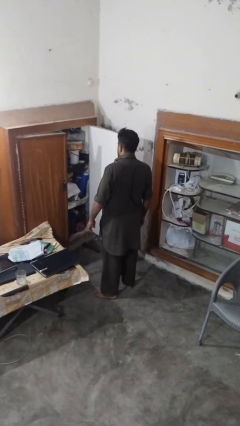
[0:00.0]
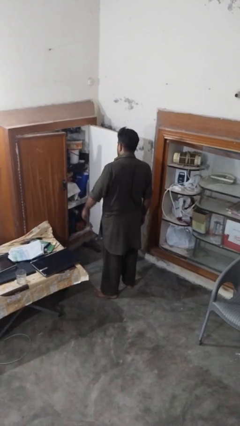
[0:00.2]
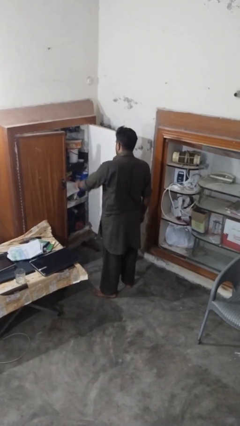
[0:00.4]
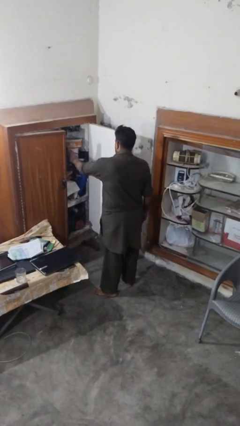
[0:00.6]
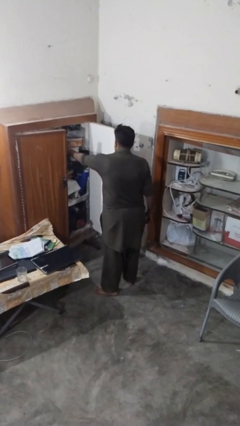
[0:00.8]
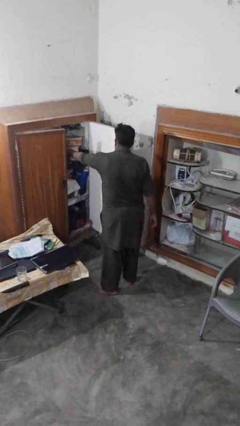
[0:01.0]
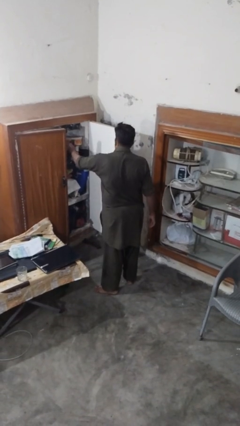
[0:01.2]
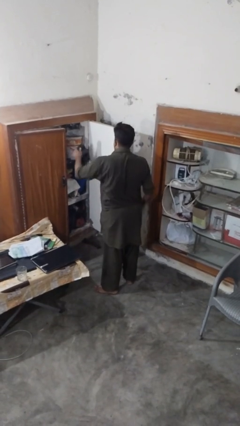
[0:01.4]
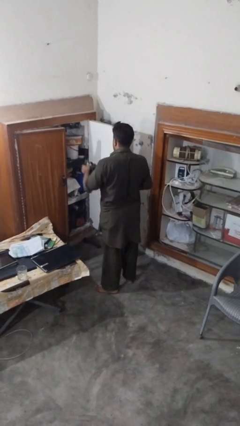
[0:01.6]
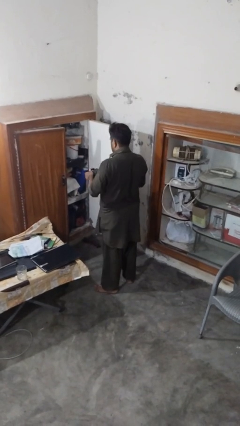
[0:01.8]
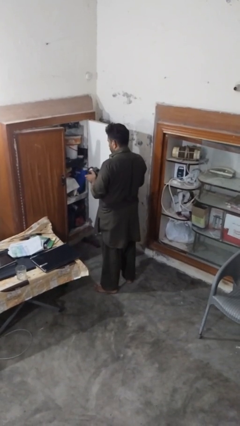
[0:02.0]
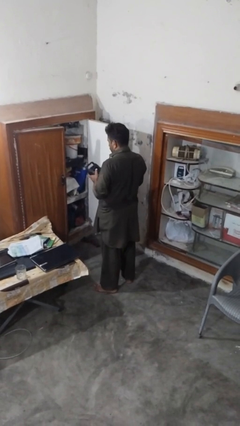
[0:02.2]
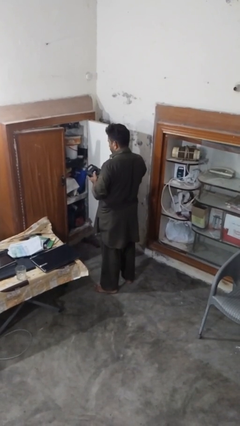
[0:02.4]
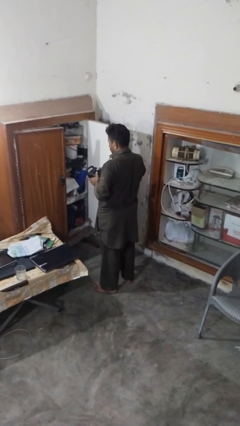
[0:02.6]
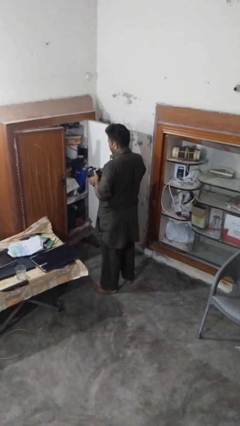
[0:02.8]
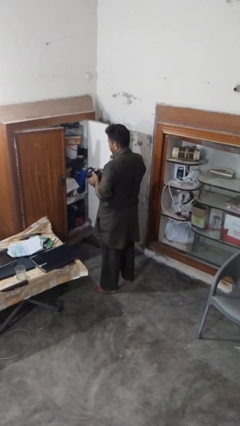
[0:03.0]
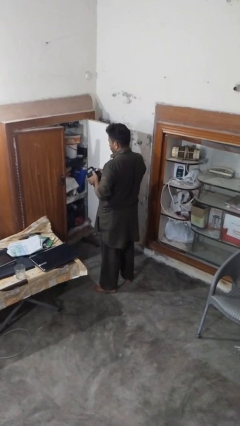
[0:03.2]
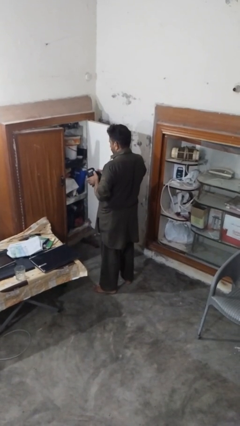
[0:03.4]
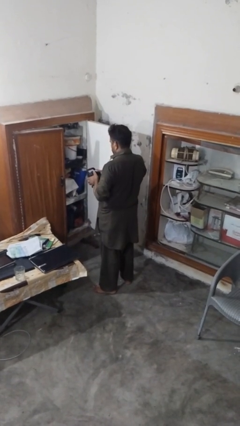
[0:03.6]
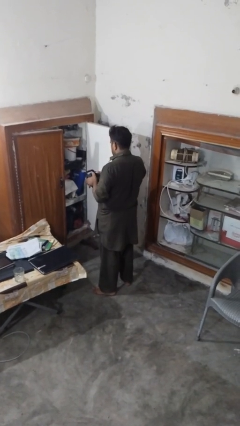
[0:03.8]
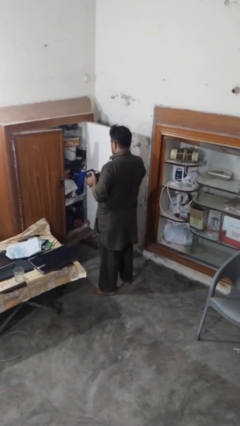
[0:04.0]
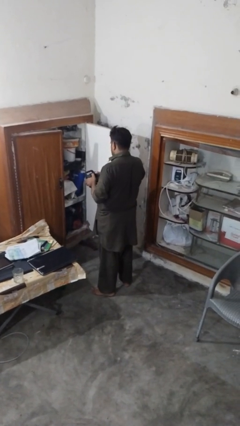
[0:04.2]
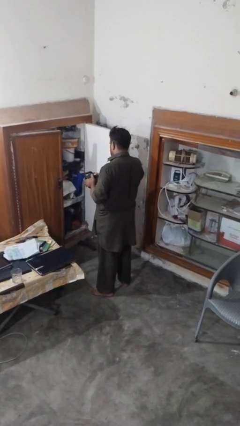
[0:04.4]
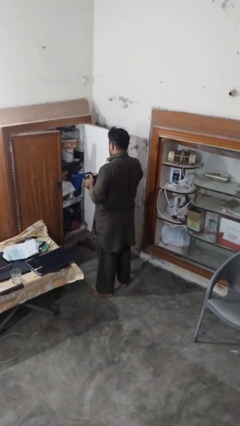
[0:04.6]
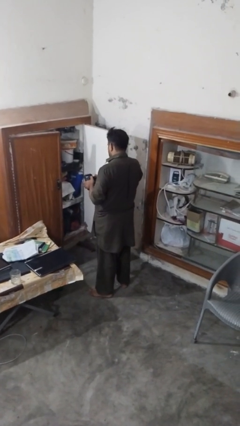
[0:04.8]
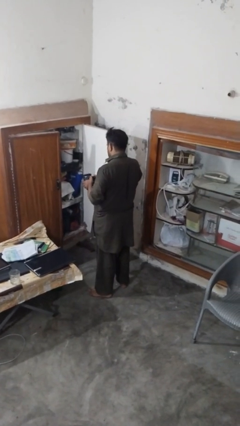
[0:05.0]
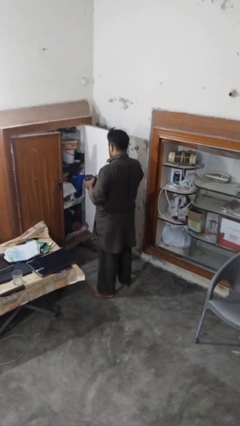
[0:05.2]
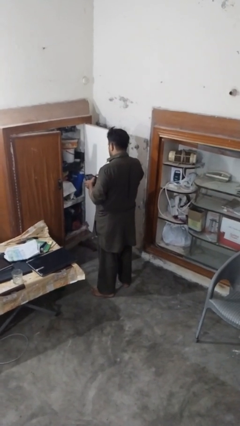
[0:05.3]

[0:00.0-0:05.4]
person picks up object from cabinet

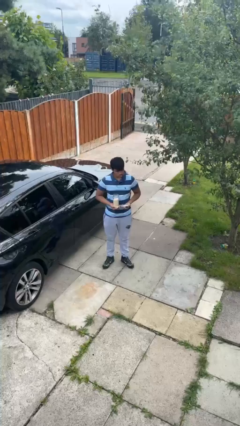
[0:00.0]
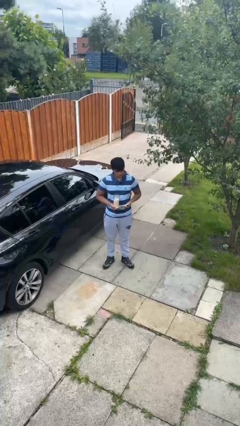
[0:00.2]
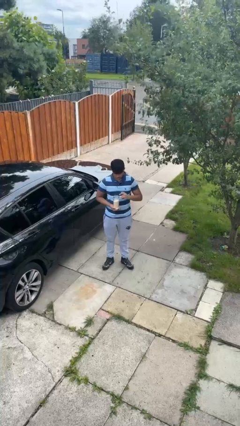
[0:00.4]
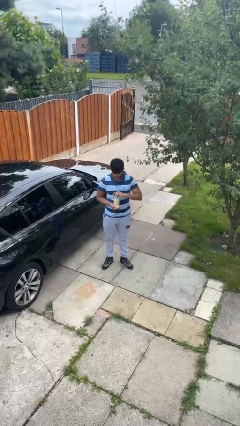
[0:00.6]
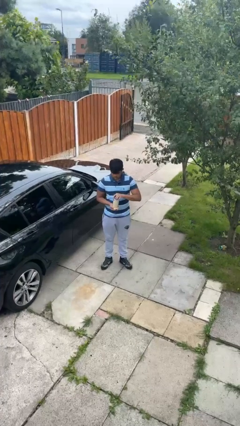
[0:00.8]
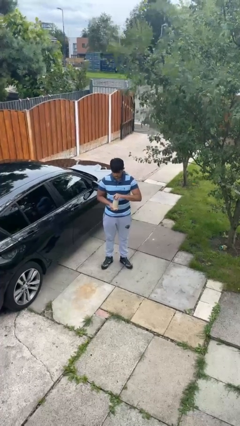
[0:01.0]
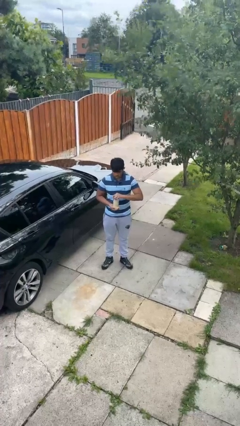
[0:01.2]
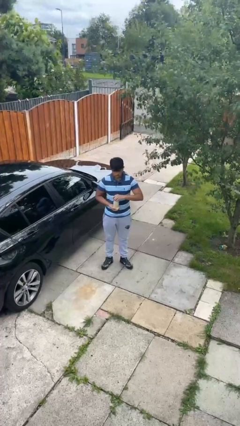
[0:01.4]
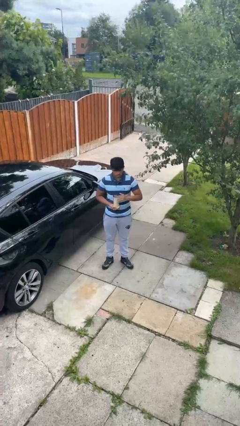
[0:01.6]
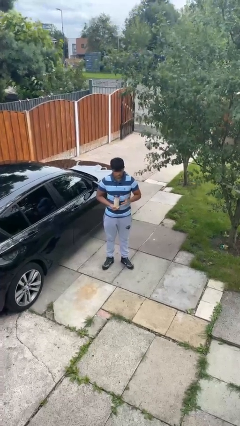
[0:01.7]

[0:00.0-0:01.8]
person closes jar

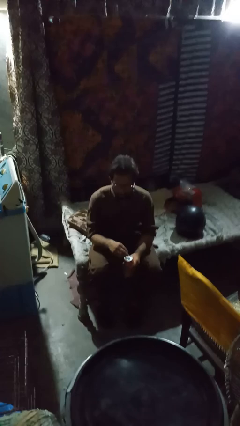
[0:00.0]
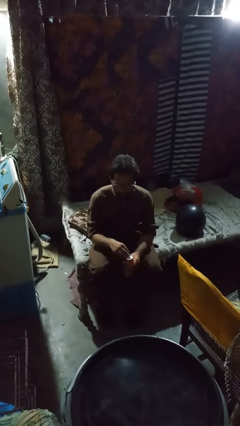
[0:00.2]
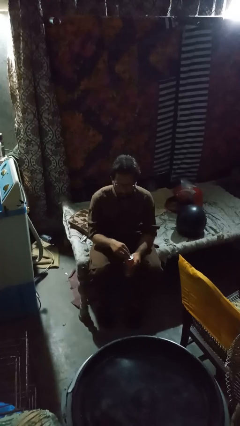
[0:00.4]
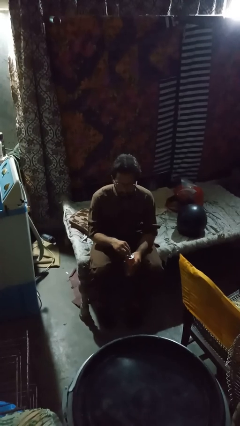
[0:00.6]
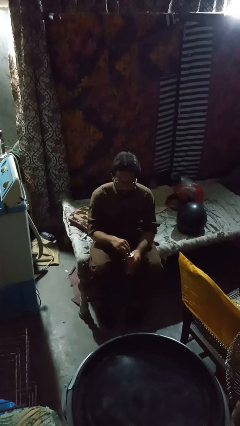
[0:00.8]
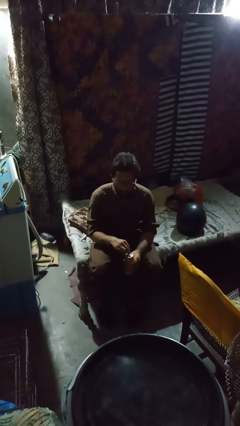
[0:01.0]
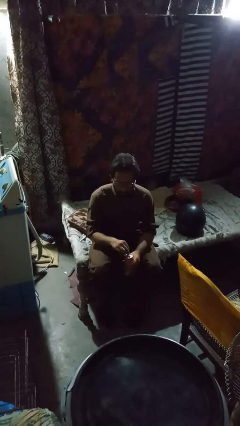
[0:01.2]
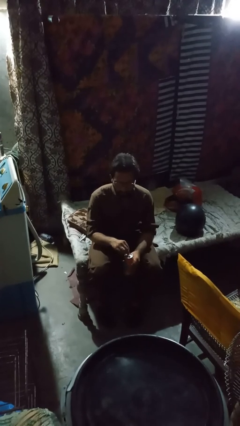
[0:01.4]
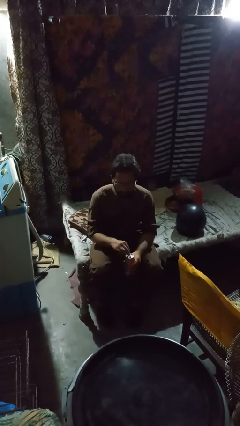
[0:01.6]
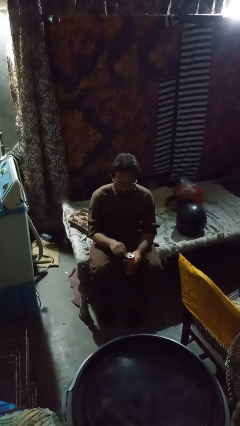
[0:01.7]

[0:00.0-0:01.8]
person opens can with can opener

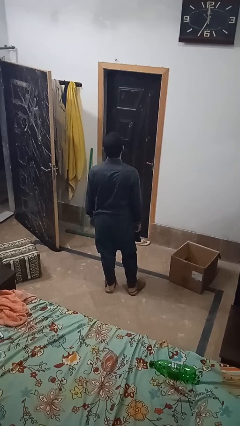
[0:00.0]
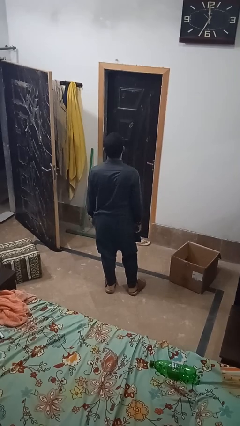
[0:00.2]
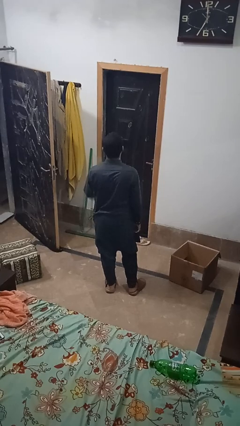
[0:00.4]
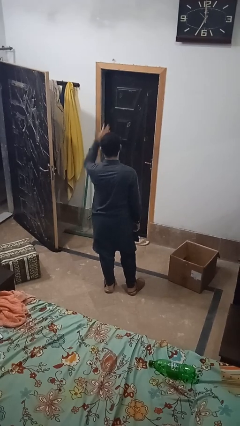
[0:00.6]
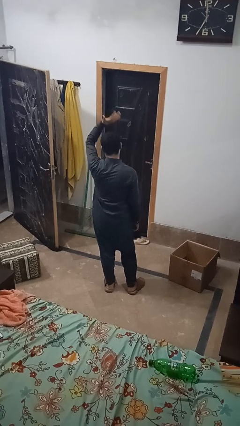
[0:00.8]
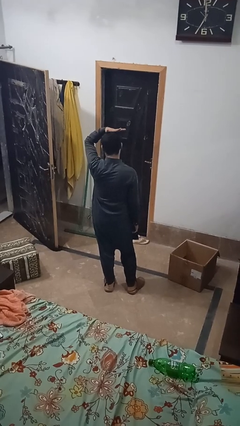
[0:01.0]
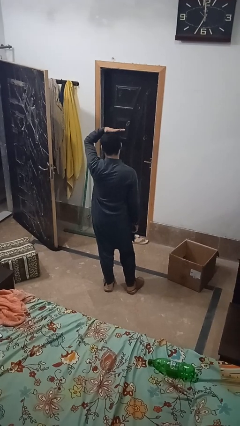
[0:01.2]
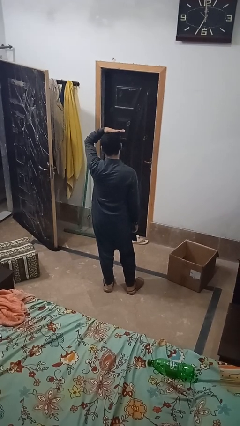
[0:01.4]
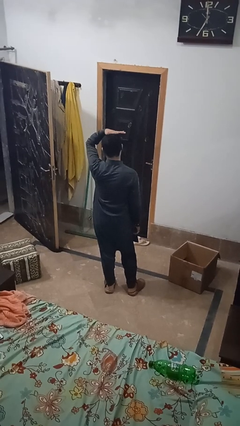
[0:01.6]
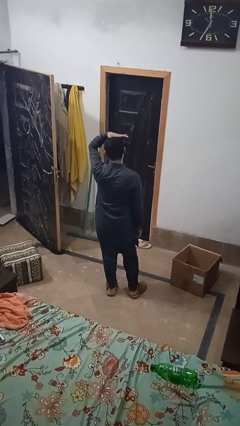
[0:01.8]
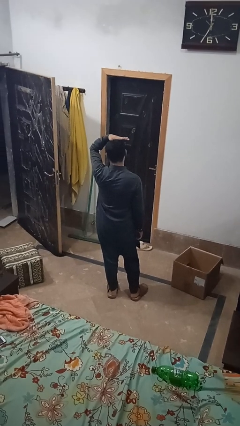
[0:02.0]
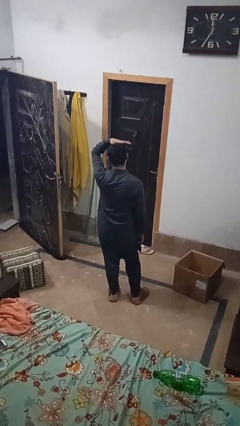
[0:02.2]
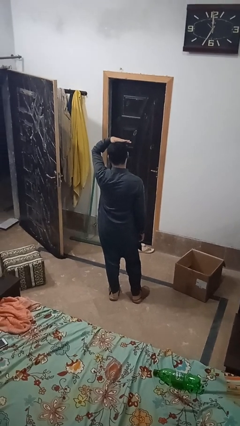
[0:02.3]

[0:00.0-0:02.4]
person pats head

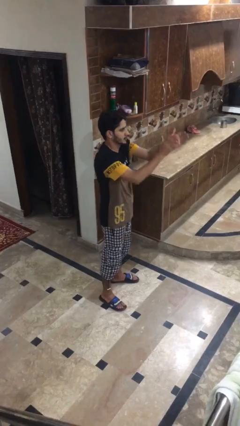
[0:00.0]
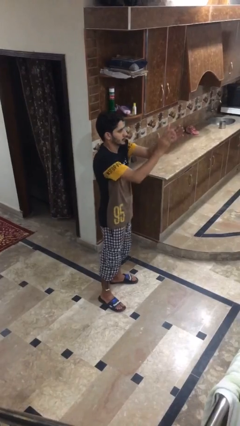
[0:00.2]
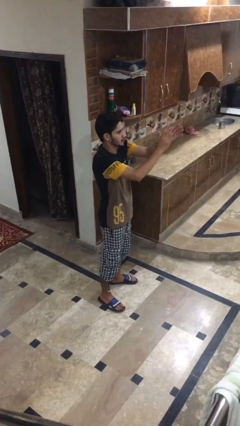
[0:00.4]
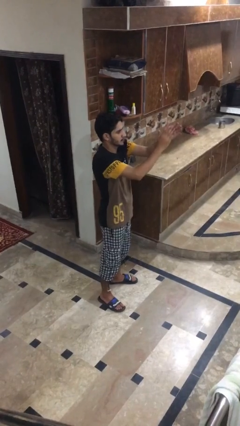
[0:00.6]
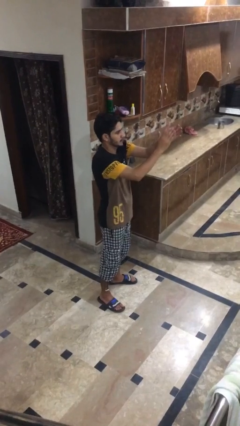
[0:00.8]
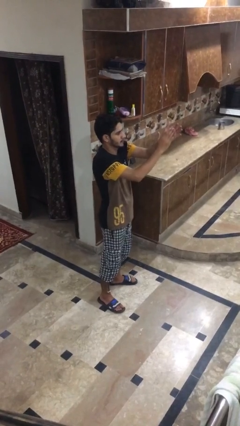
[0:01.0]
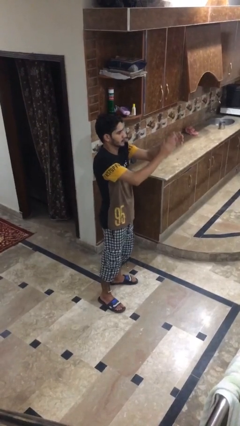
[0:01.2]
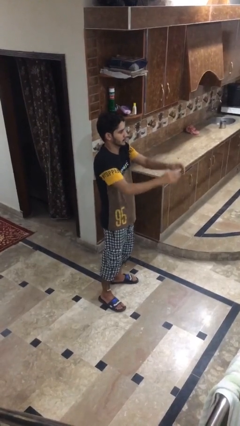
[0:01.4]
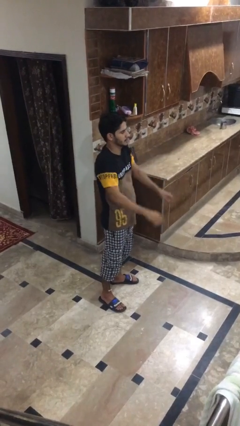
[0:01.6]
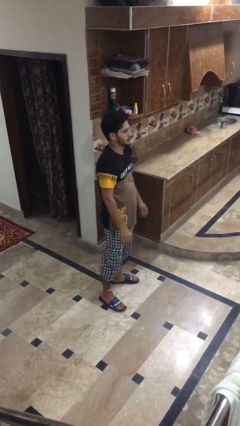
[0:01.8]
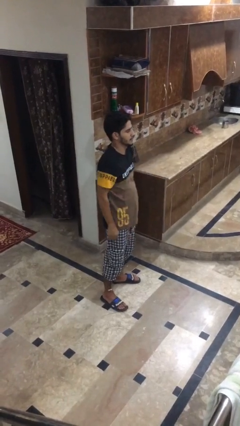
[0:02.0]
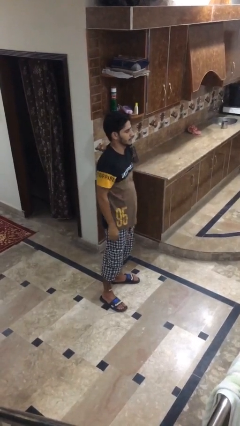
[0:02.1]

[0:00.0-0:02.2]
person claps hands

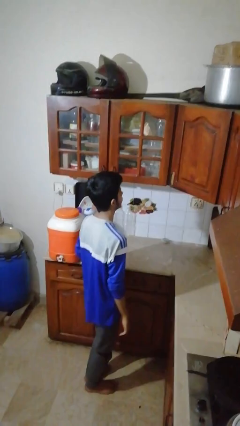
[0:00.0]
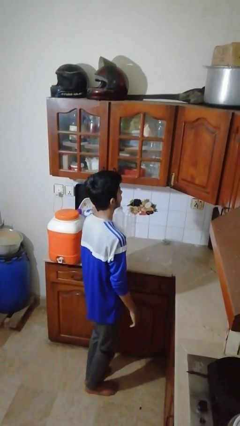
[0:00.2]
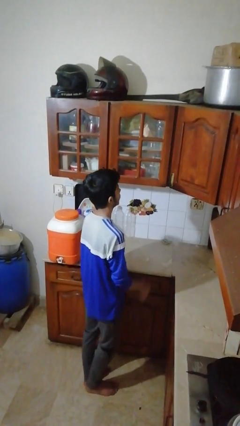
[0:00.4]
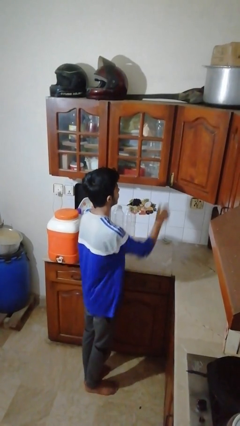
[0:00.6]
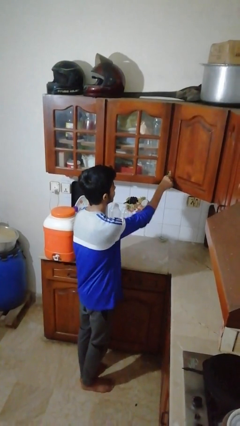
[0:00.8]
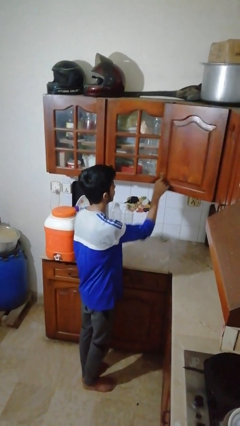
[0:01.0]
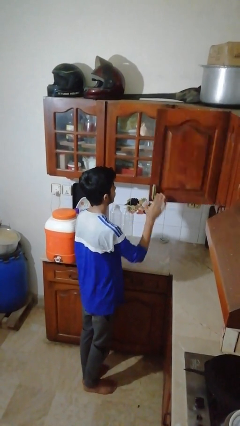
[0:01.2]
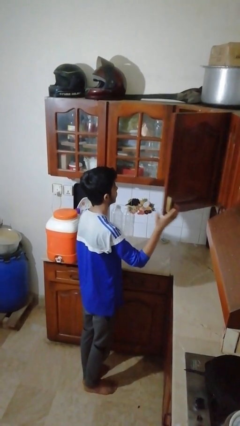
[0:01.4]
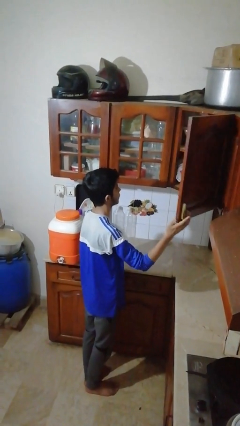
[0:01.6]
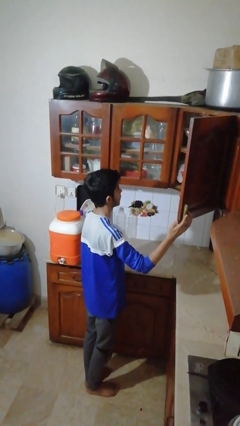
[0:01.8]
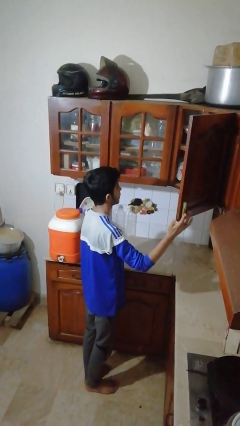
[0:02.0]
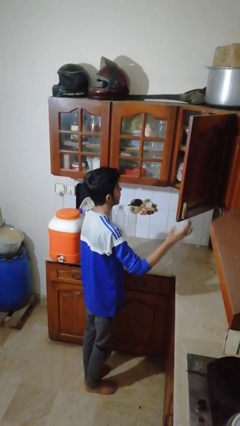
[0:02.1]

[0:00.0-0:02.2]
person opens cabinet

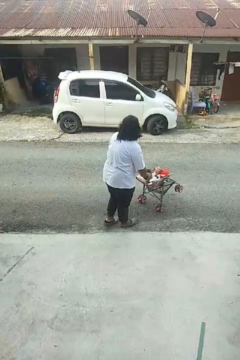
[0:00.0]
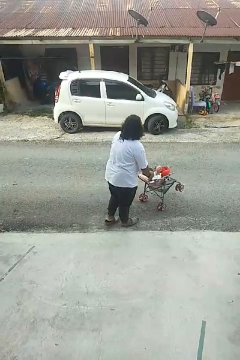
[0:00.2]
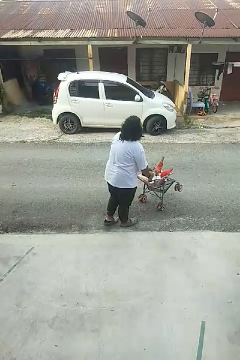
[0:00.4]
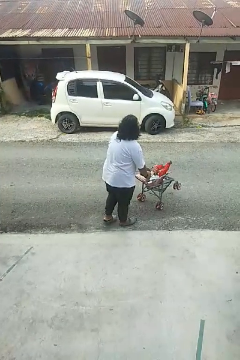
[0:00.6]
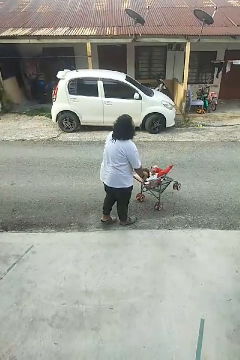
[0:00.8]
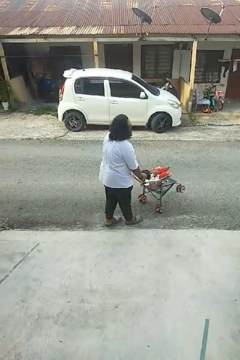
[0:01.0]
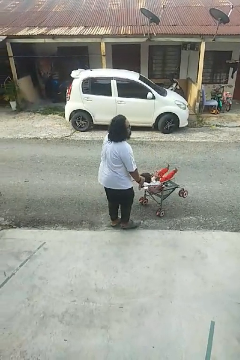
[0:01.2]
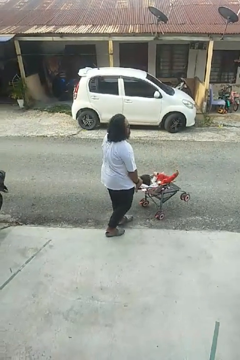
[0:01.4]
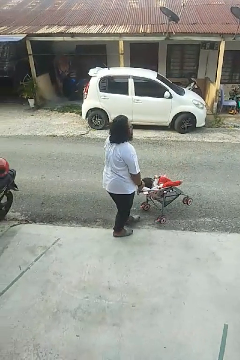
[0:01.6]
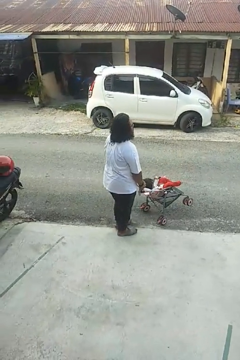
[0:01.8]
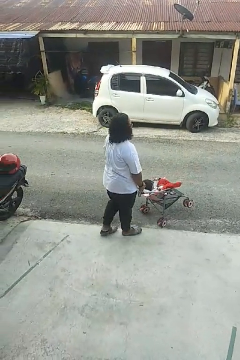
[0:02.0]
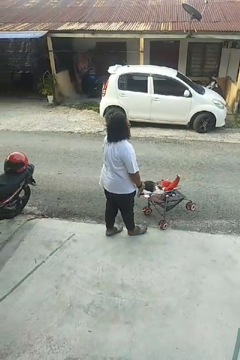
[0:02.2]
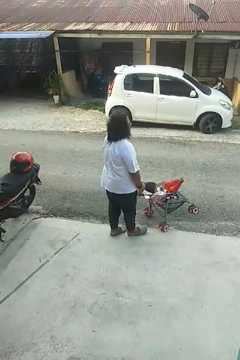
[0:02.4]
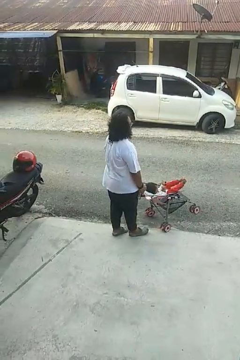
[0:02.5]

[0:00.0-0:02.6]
person pulls wheeled cart
